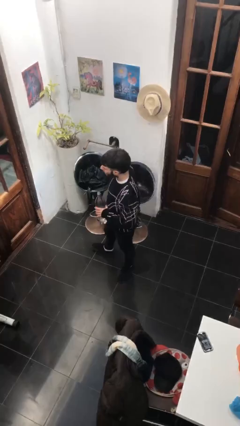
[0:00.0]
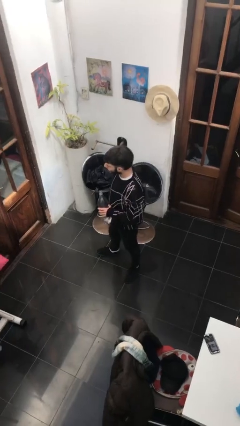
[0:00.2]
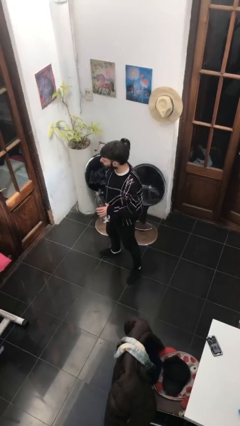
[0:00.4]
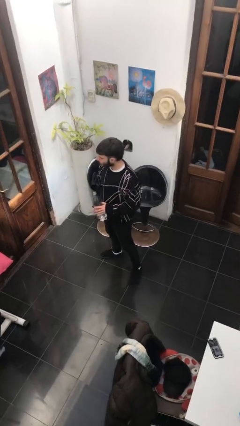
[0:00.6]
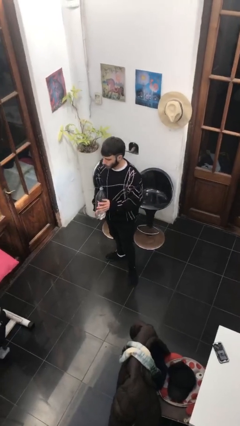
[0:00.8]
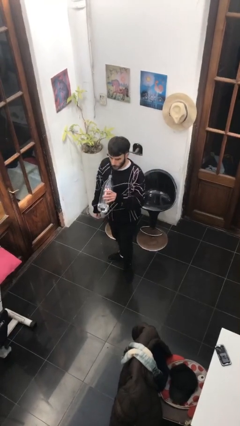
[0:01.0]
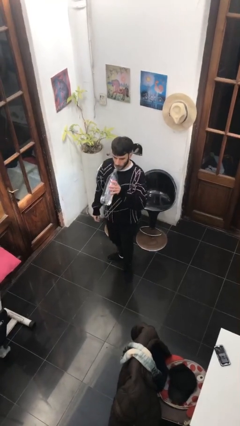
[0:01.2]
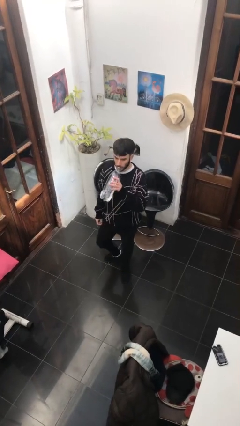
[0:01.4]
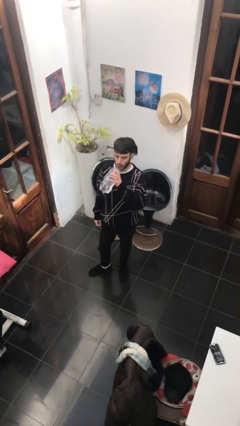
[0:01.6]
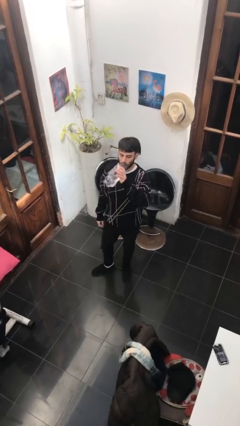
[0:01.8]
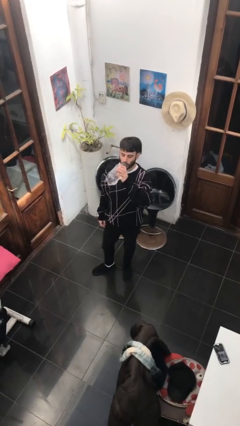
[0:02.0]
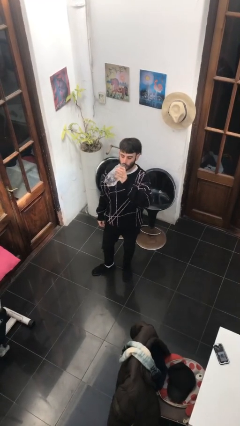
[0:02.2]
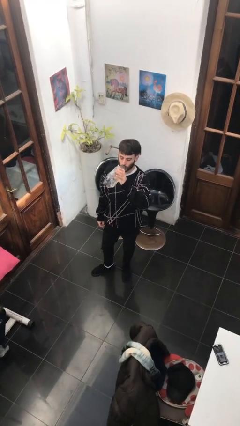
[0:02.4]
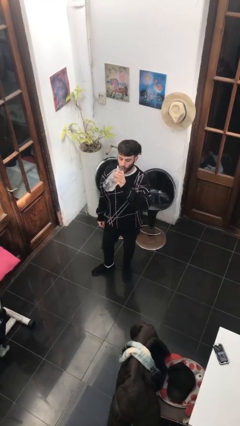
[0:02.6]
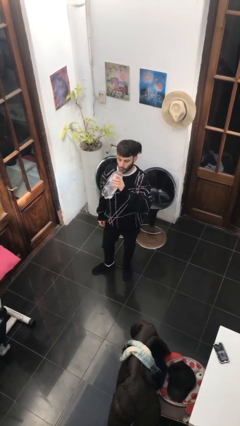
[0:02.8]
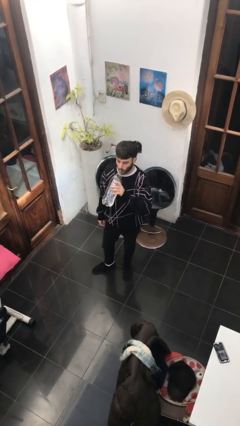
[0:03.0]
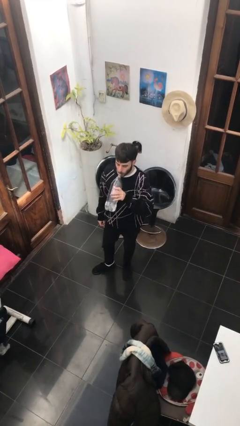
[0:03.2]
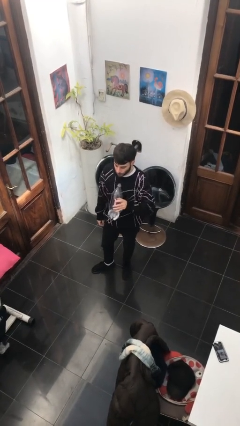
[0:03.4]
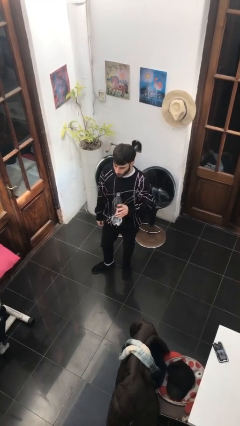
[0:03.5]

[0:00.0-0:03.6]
person drinks from bottle

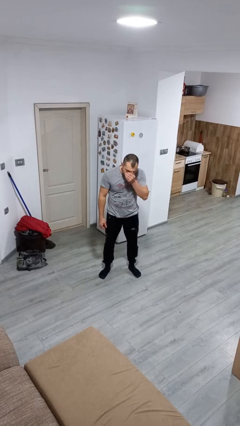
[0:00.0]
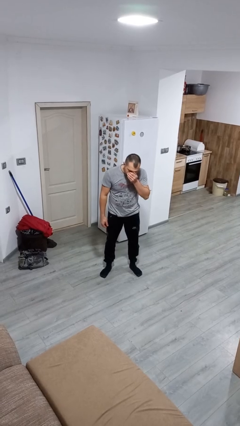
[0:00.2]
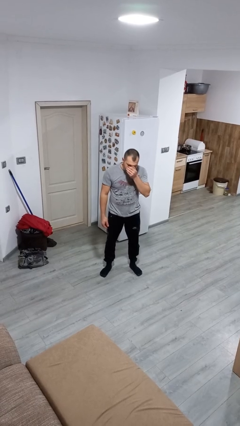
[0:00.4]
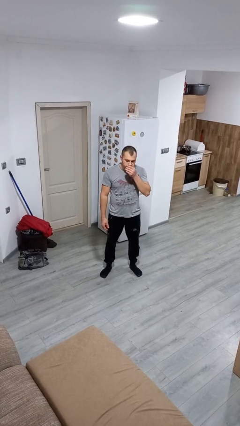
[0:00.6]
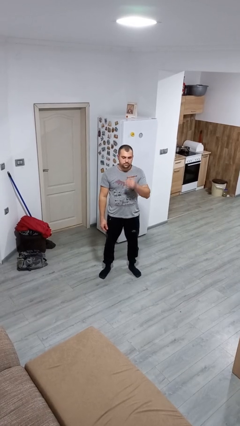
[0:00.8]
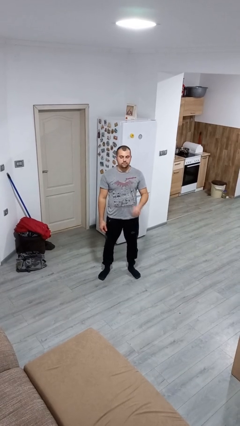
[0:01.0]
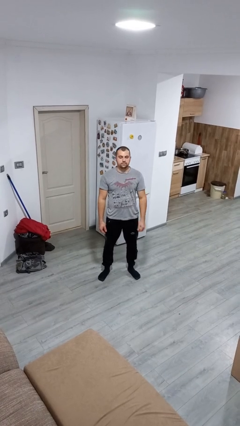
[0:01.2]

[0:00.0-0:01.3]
person sneezes into hand

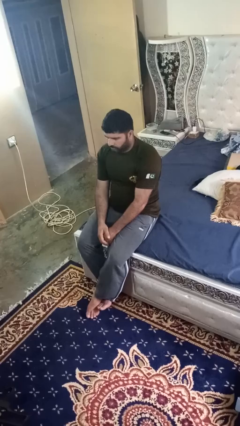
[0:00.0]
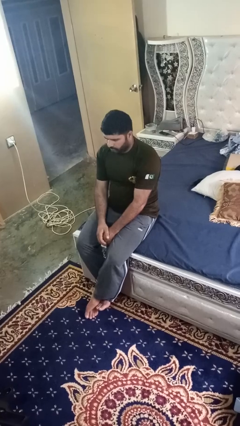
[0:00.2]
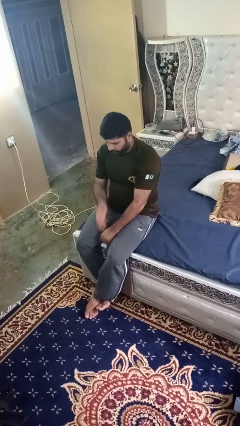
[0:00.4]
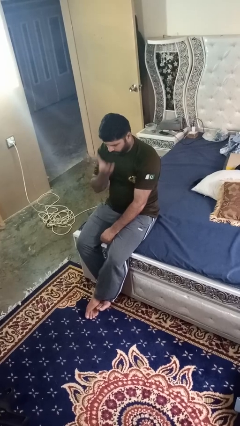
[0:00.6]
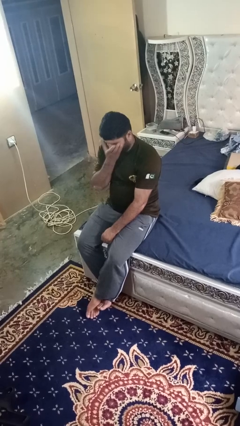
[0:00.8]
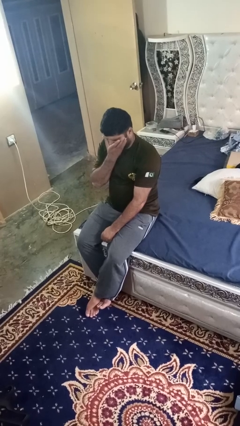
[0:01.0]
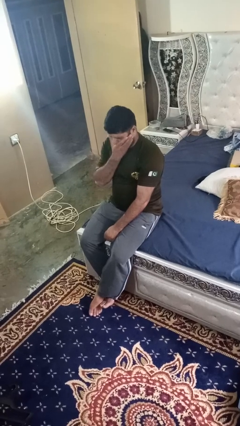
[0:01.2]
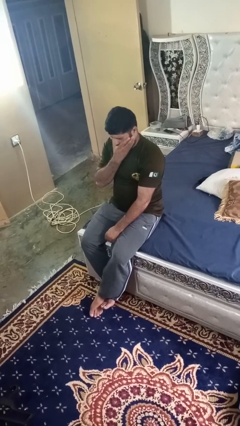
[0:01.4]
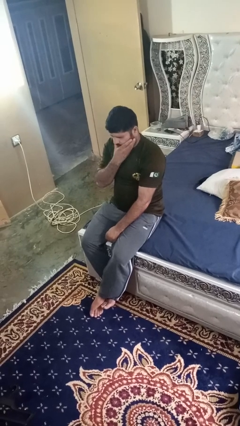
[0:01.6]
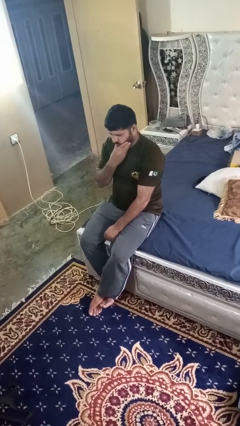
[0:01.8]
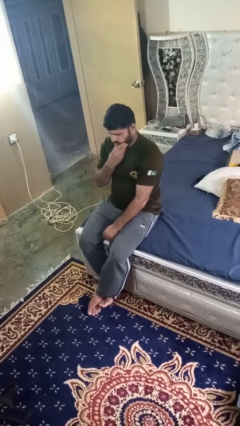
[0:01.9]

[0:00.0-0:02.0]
person strokes chin

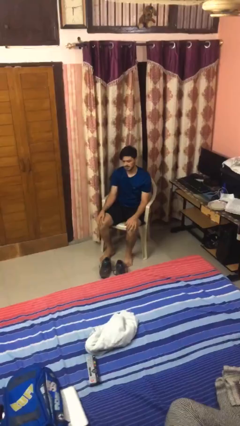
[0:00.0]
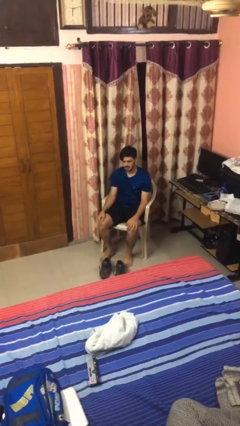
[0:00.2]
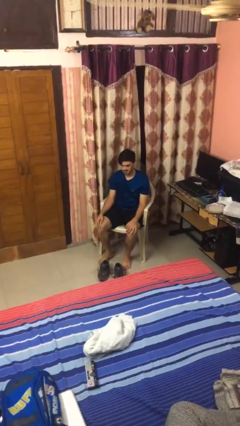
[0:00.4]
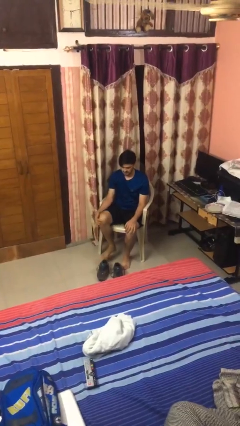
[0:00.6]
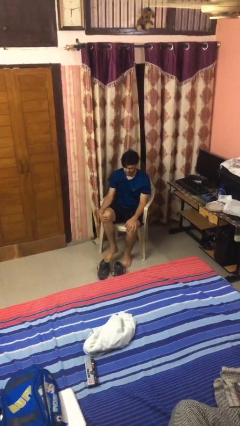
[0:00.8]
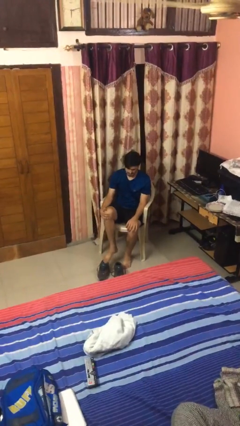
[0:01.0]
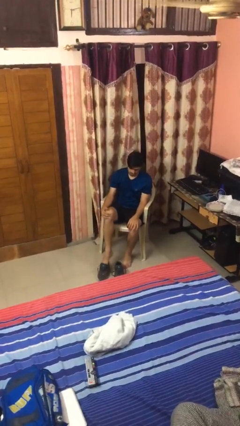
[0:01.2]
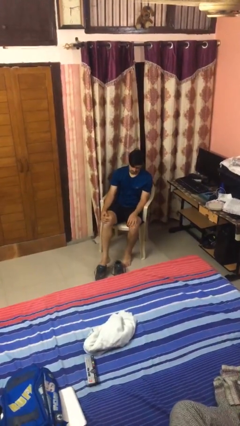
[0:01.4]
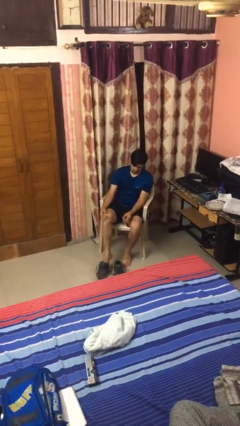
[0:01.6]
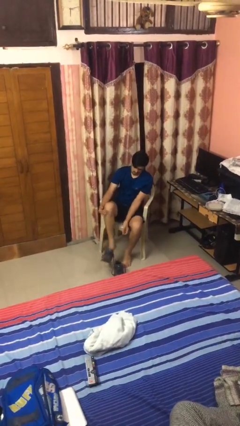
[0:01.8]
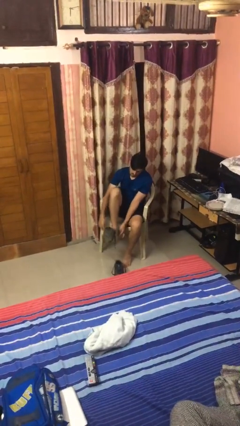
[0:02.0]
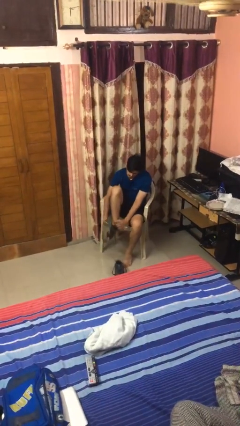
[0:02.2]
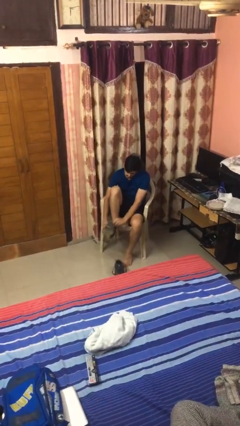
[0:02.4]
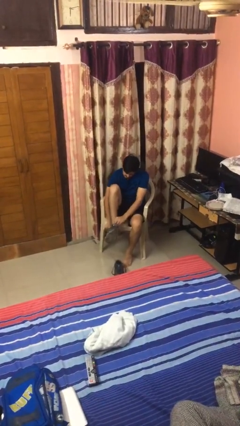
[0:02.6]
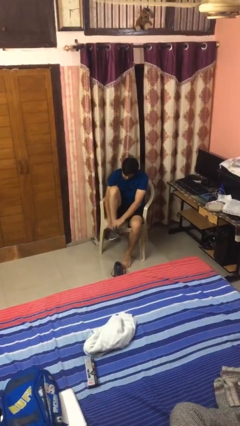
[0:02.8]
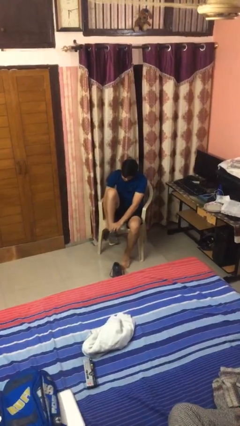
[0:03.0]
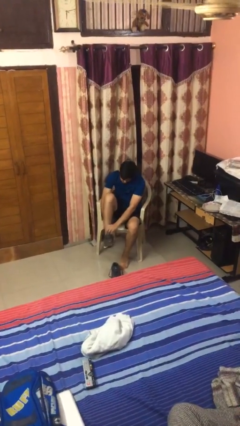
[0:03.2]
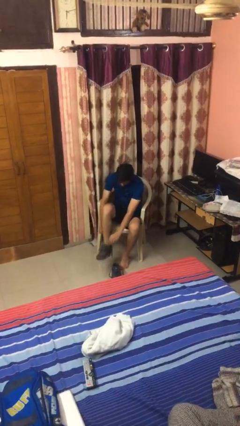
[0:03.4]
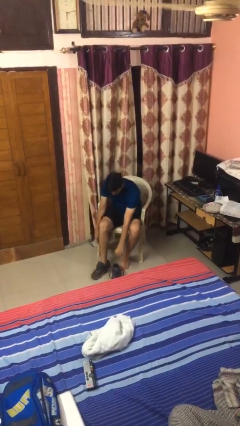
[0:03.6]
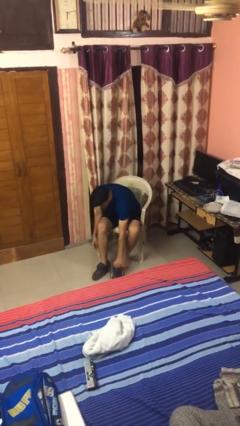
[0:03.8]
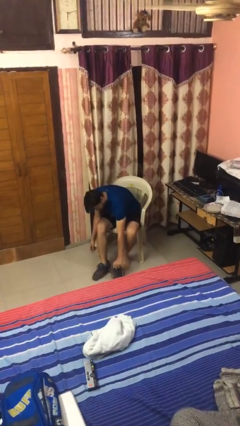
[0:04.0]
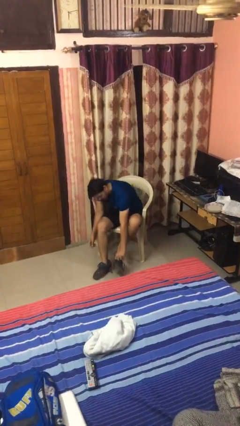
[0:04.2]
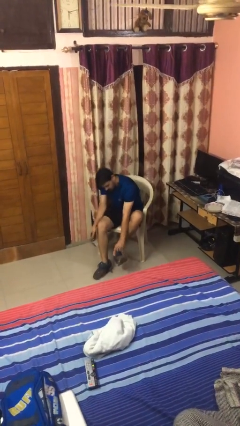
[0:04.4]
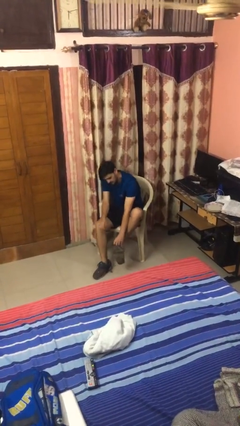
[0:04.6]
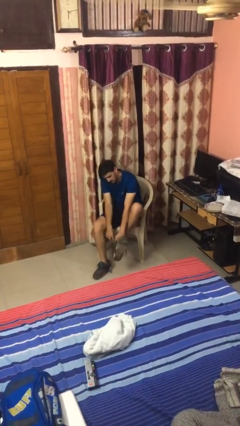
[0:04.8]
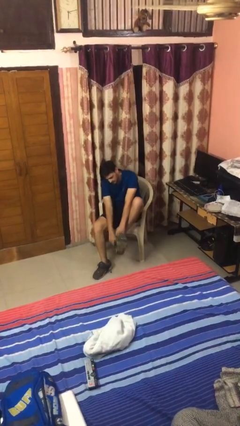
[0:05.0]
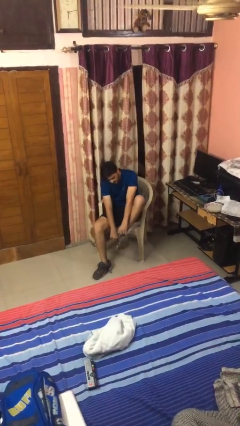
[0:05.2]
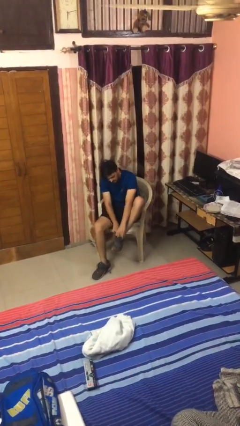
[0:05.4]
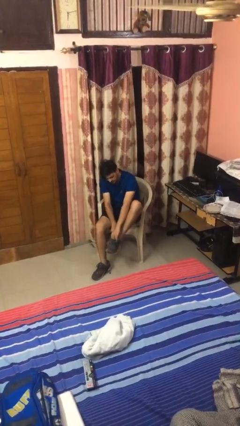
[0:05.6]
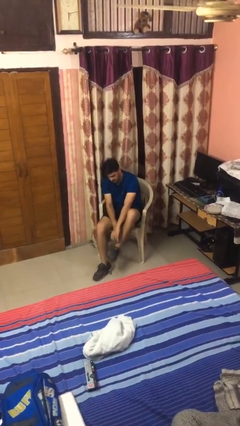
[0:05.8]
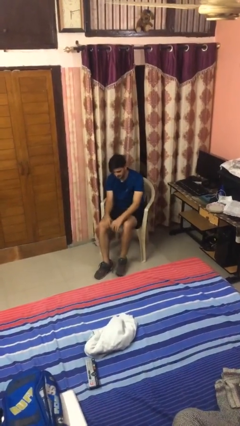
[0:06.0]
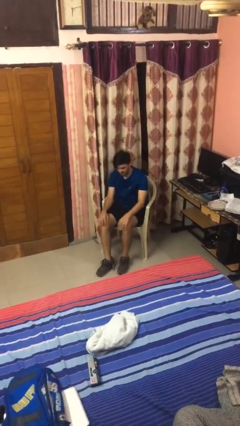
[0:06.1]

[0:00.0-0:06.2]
person puts on boots

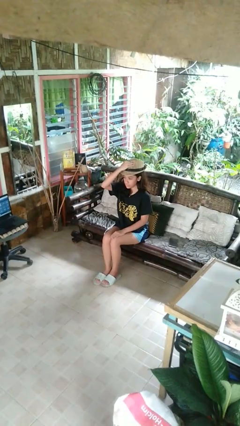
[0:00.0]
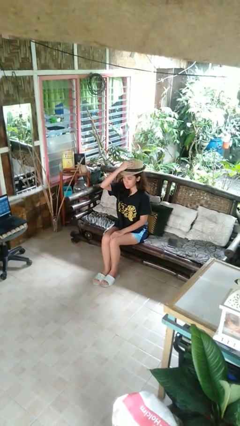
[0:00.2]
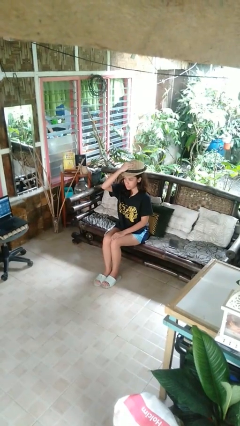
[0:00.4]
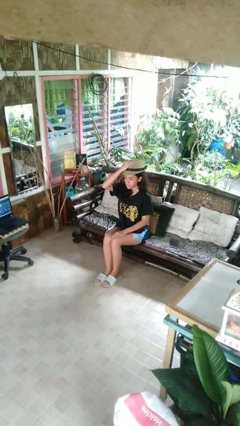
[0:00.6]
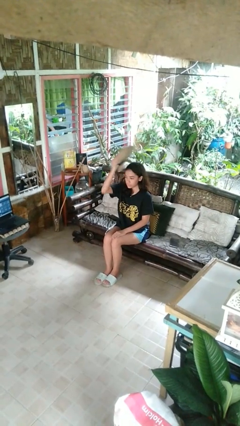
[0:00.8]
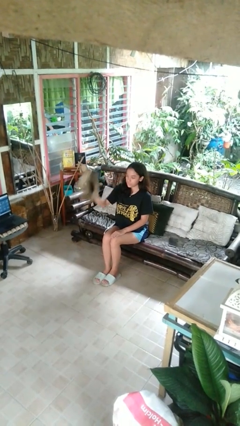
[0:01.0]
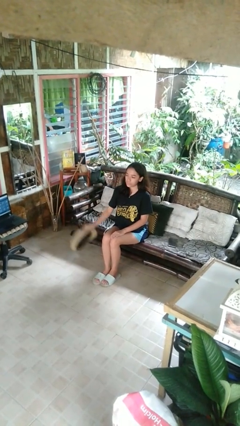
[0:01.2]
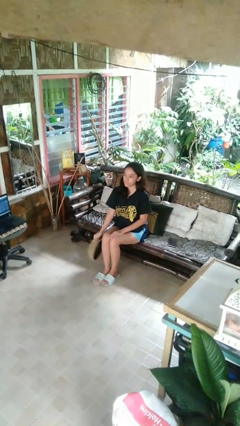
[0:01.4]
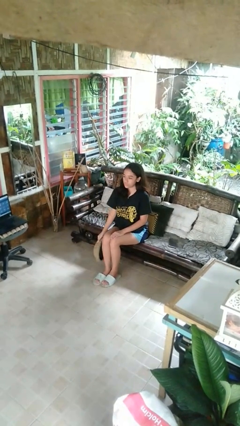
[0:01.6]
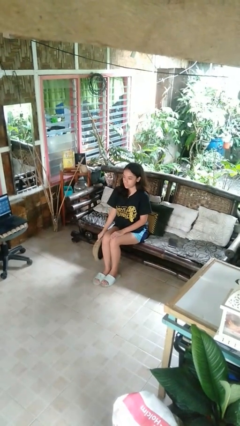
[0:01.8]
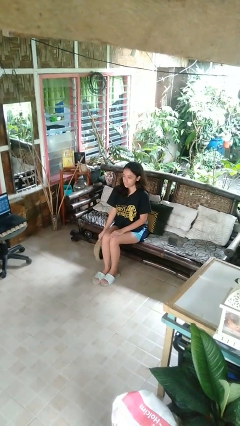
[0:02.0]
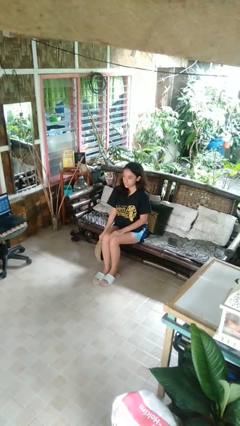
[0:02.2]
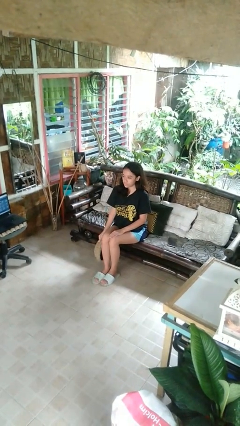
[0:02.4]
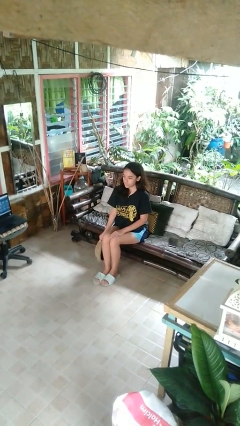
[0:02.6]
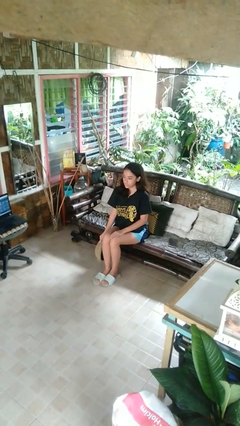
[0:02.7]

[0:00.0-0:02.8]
person takes off hat

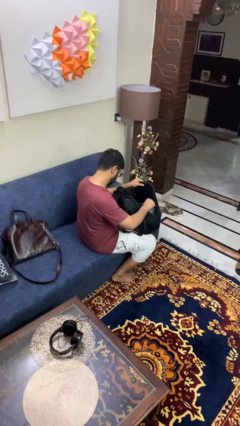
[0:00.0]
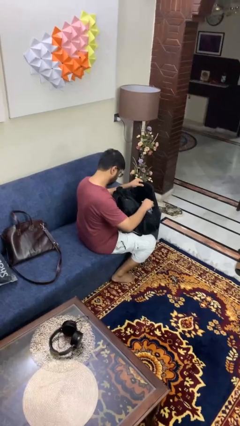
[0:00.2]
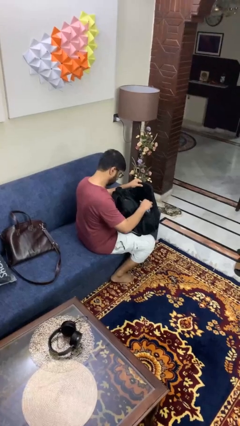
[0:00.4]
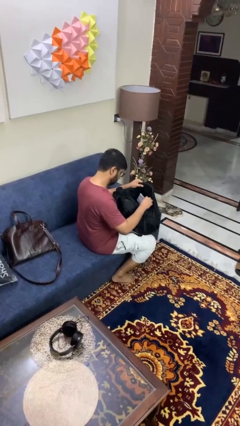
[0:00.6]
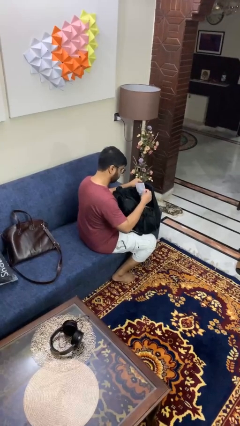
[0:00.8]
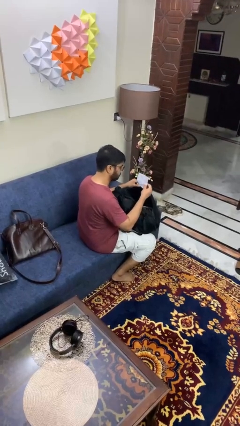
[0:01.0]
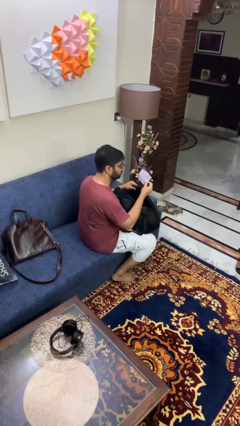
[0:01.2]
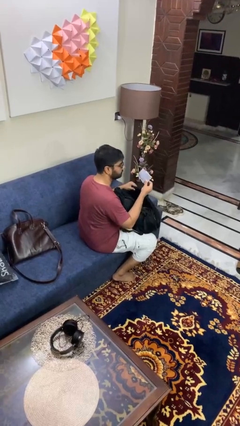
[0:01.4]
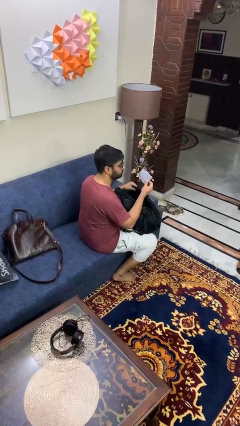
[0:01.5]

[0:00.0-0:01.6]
person takes object from backpack

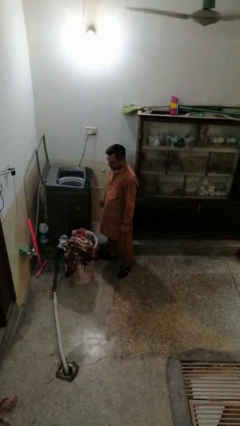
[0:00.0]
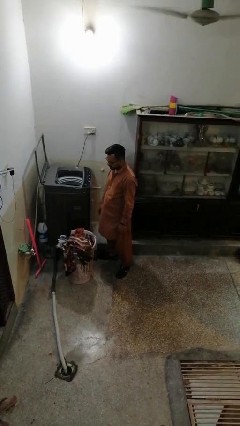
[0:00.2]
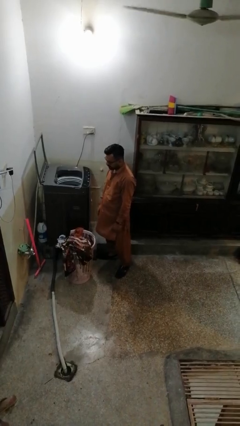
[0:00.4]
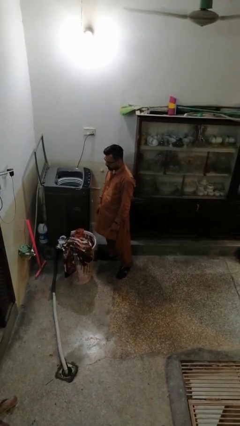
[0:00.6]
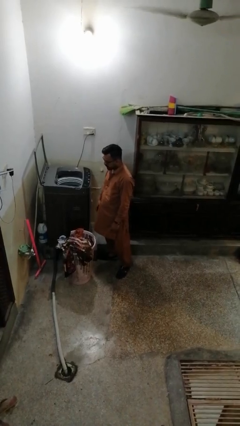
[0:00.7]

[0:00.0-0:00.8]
person unloads dryer
